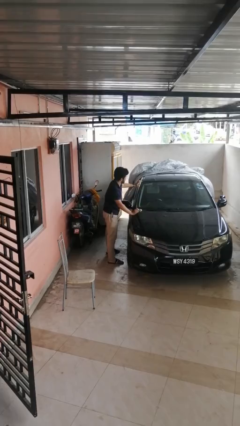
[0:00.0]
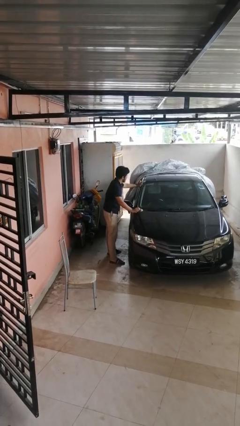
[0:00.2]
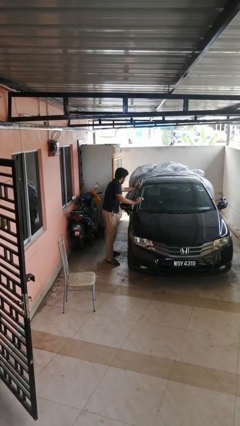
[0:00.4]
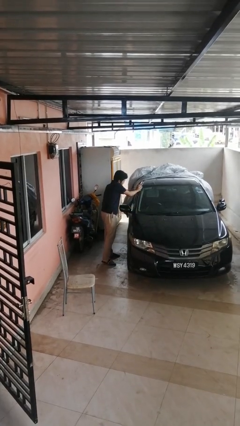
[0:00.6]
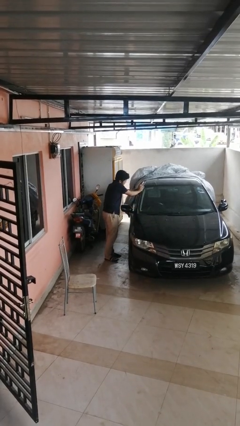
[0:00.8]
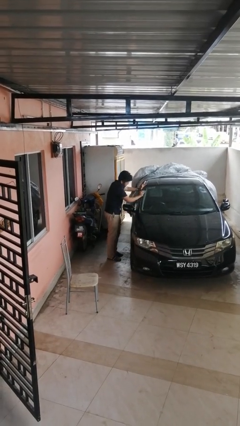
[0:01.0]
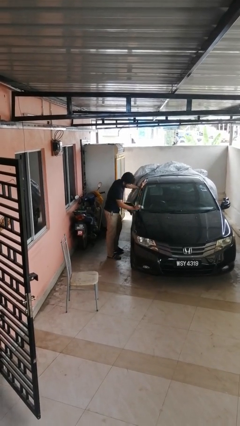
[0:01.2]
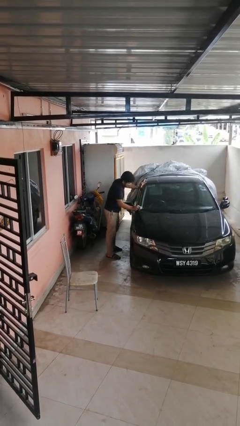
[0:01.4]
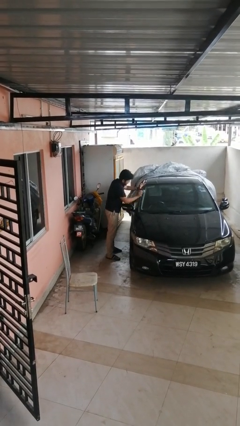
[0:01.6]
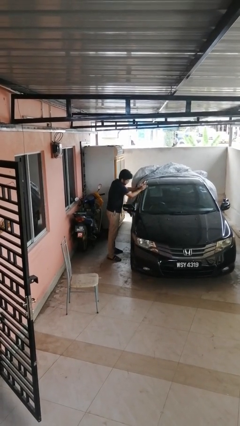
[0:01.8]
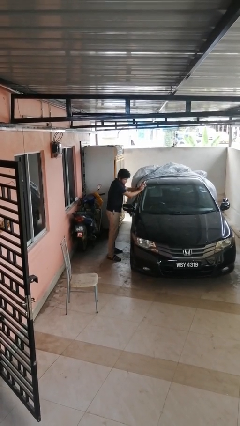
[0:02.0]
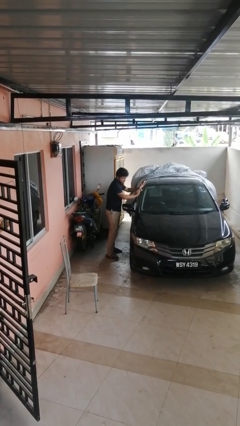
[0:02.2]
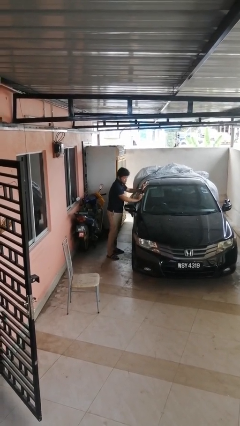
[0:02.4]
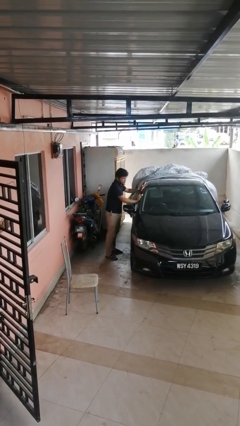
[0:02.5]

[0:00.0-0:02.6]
person polishes car with rag

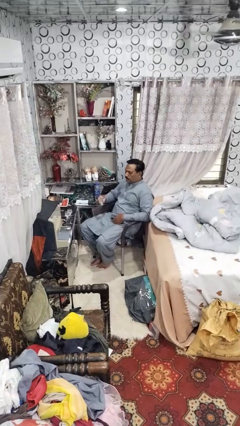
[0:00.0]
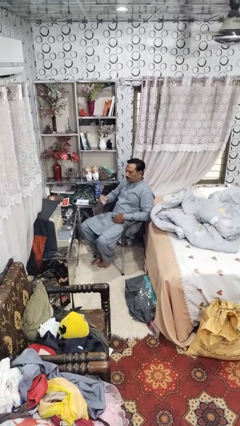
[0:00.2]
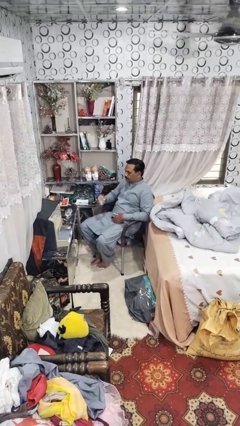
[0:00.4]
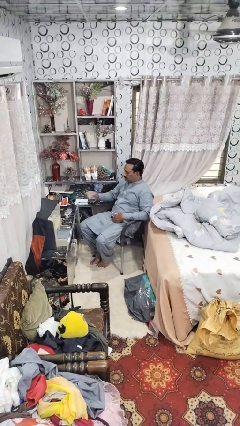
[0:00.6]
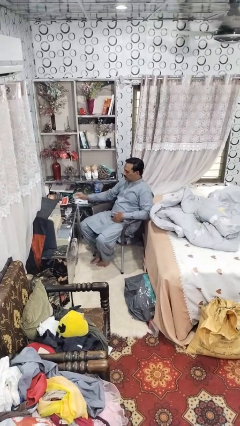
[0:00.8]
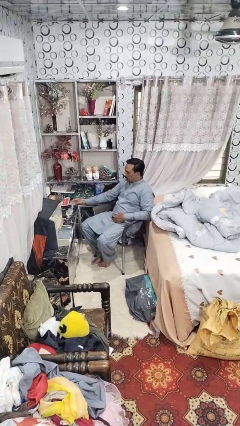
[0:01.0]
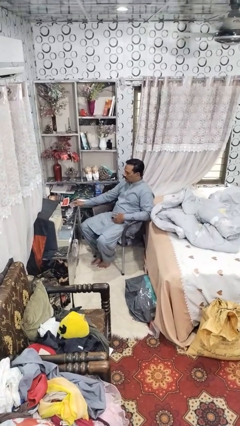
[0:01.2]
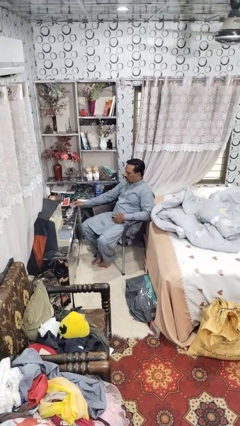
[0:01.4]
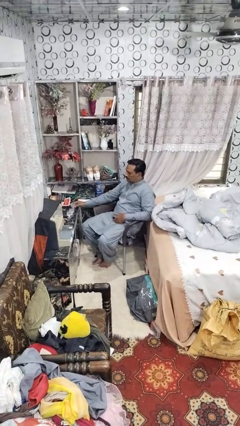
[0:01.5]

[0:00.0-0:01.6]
person puts down object on table

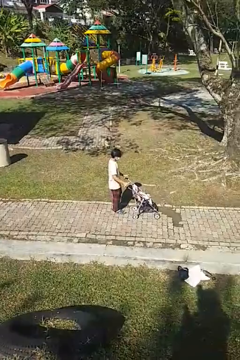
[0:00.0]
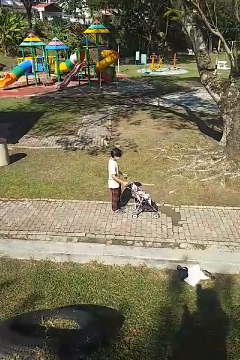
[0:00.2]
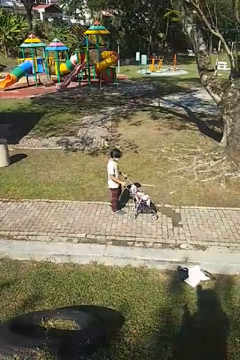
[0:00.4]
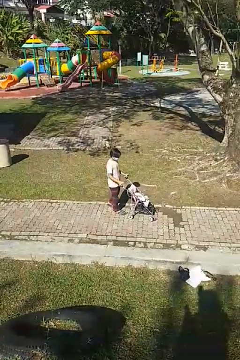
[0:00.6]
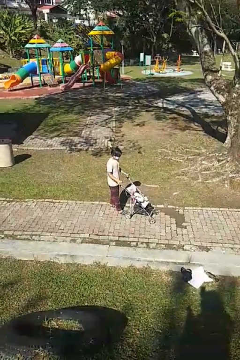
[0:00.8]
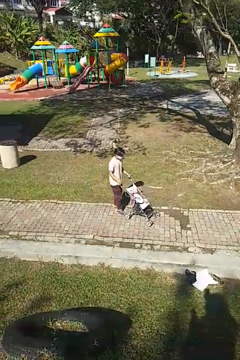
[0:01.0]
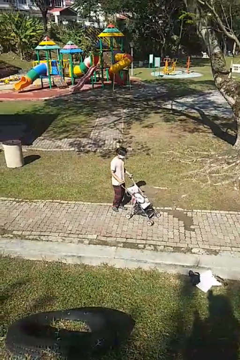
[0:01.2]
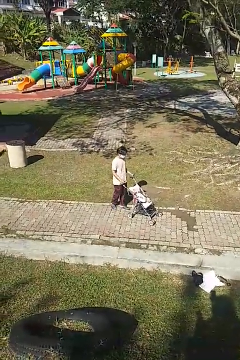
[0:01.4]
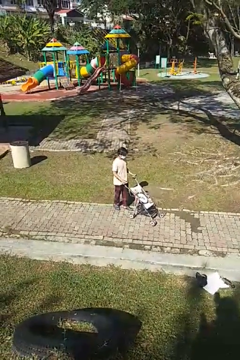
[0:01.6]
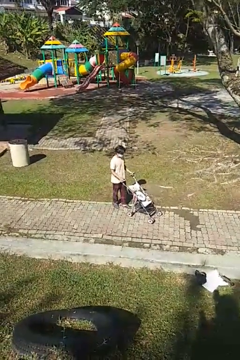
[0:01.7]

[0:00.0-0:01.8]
person pulls wheeled cart

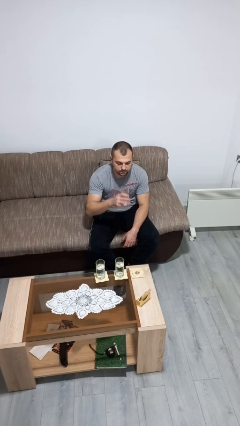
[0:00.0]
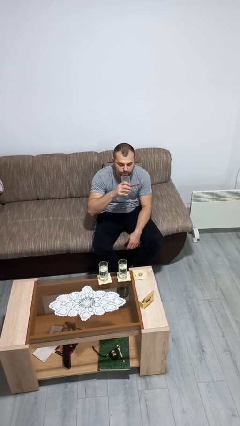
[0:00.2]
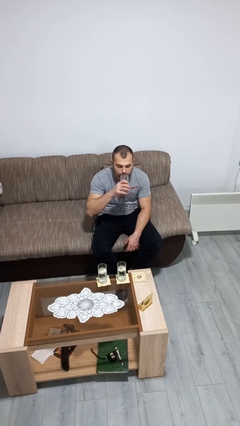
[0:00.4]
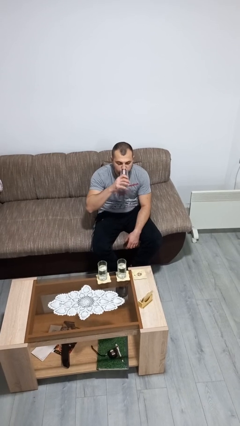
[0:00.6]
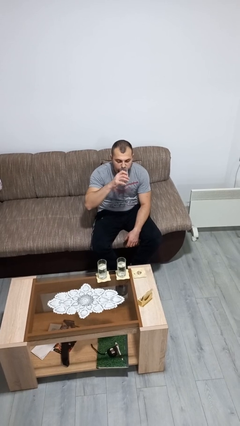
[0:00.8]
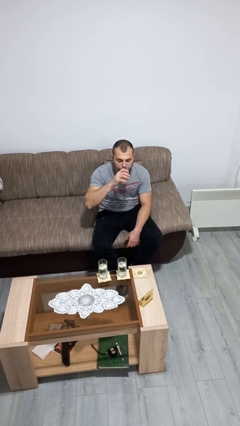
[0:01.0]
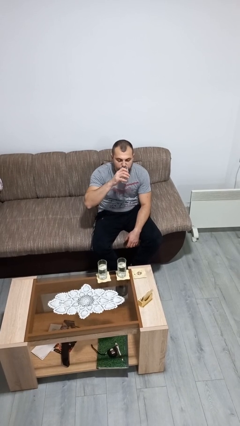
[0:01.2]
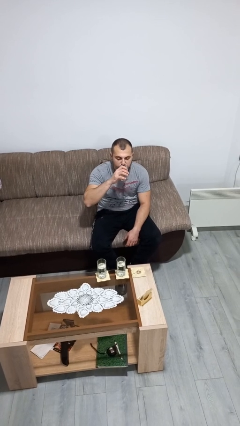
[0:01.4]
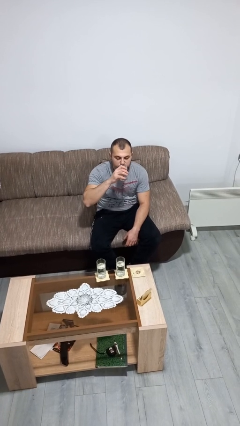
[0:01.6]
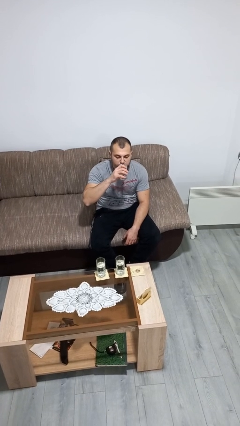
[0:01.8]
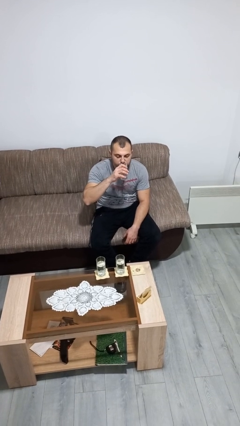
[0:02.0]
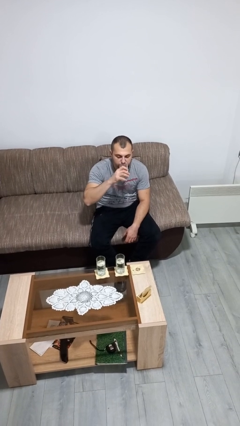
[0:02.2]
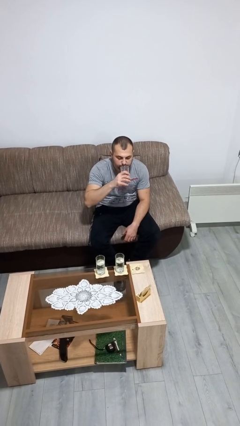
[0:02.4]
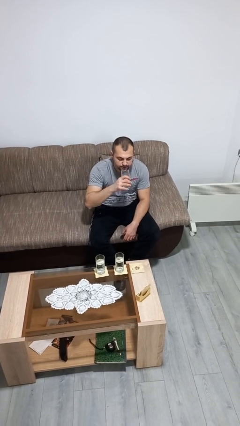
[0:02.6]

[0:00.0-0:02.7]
person drinks from shotglass

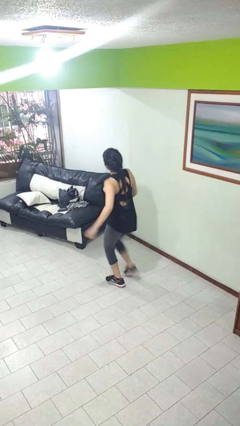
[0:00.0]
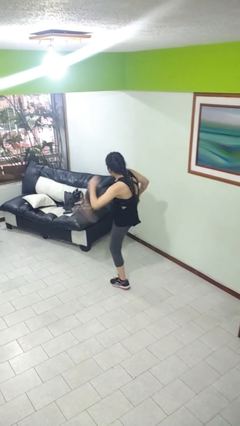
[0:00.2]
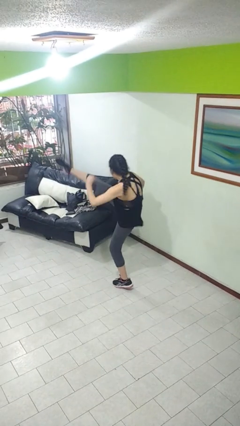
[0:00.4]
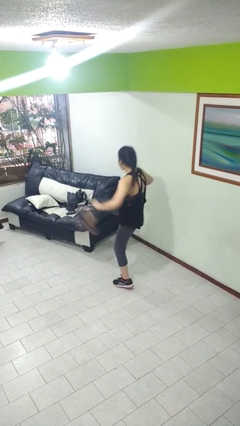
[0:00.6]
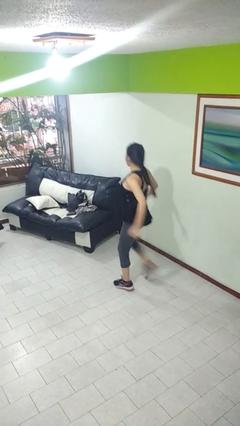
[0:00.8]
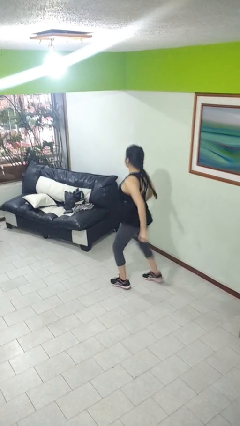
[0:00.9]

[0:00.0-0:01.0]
person karate kicks

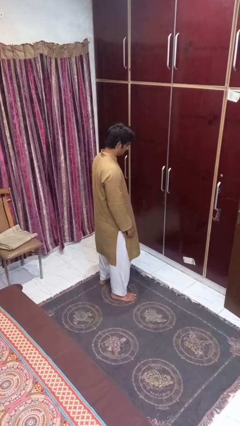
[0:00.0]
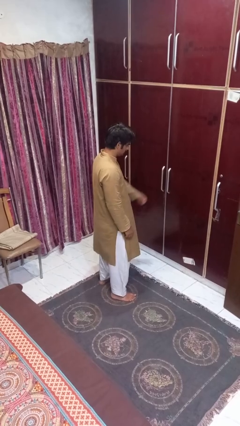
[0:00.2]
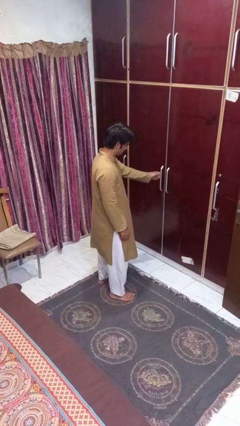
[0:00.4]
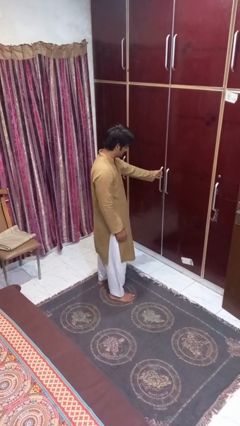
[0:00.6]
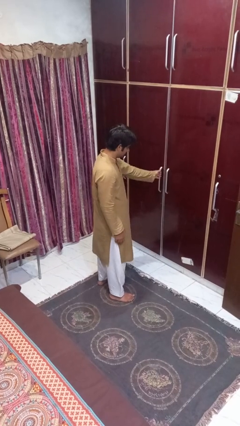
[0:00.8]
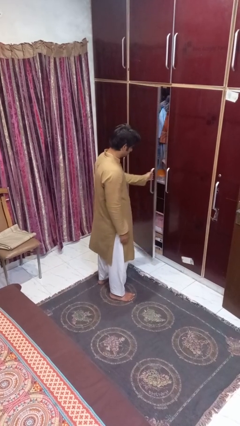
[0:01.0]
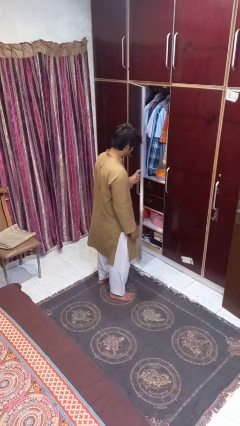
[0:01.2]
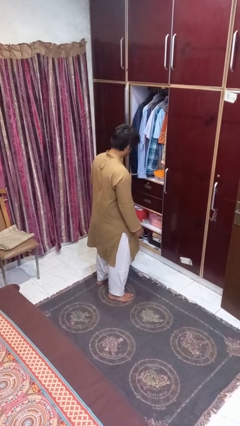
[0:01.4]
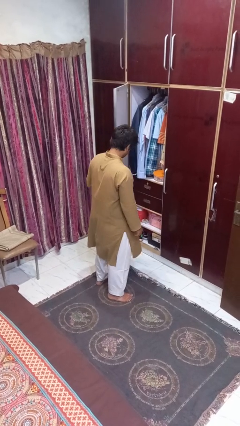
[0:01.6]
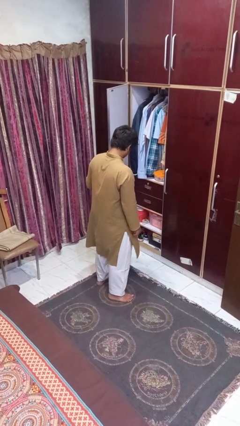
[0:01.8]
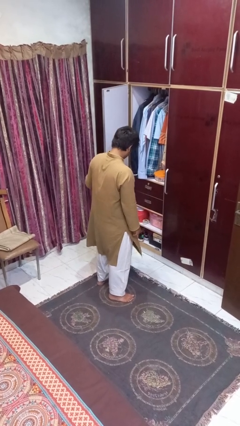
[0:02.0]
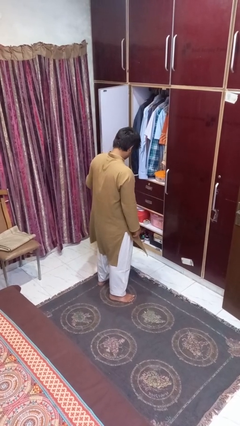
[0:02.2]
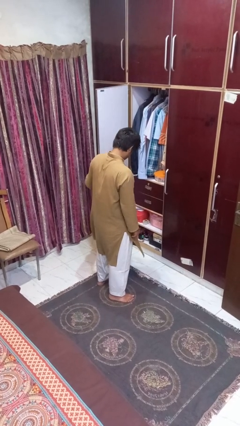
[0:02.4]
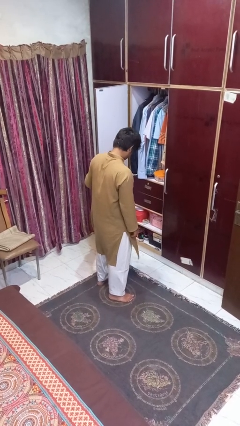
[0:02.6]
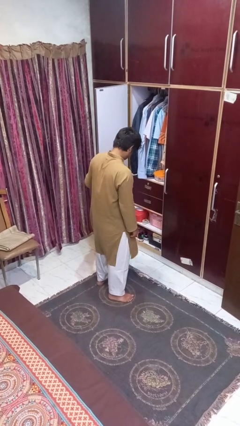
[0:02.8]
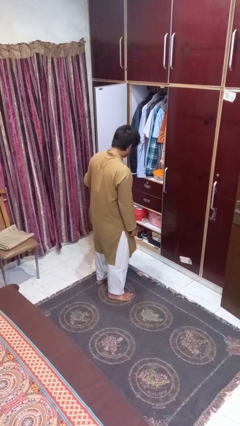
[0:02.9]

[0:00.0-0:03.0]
person opens closet door

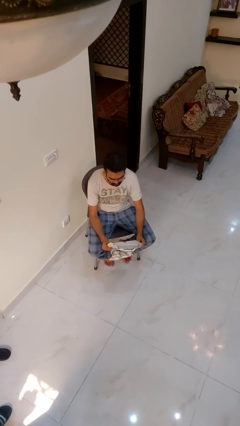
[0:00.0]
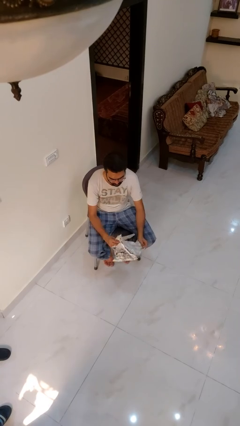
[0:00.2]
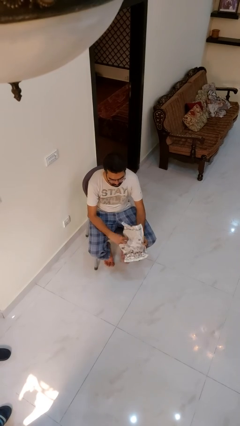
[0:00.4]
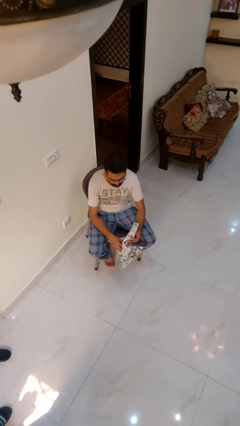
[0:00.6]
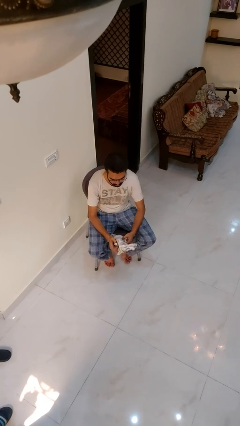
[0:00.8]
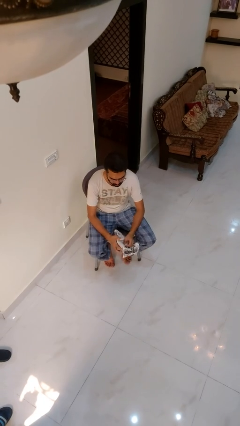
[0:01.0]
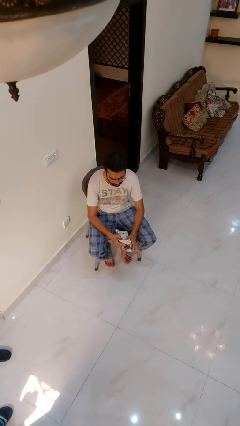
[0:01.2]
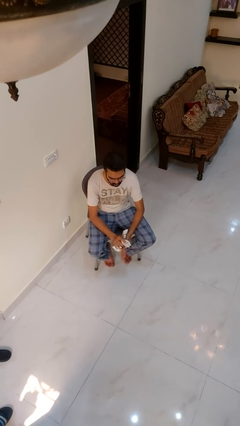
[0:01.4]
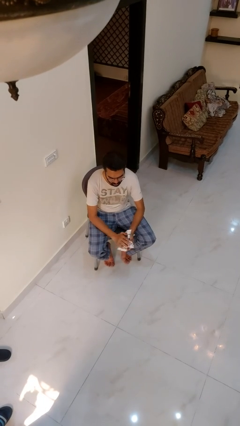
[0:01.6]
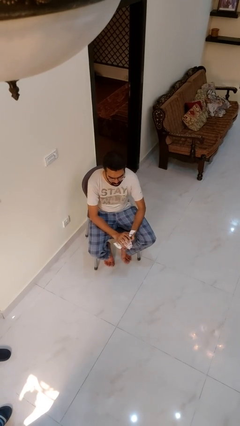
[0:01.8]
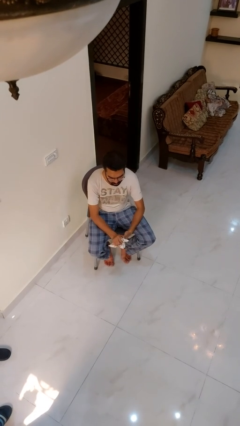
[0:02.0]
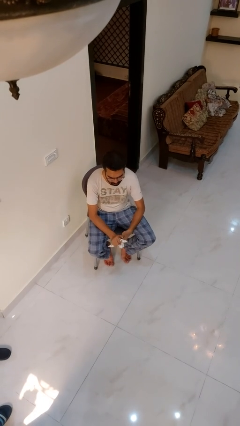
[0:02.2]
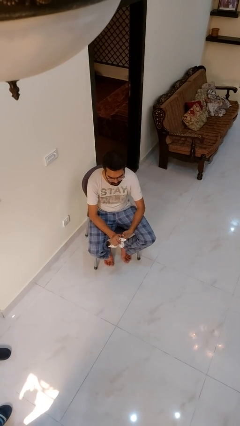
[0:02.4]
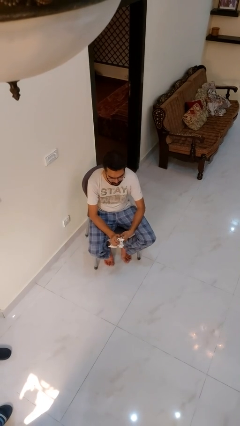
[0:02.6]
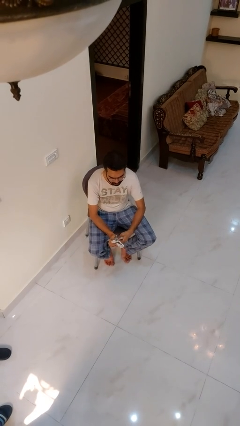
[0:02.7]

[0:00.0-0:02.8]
person crumples paper

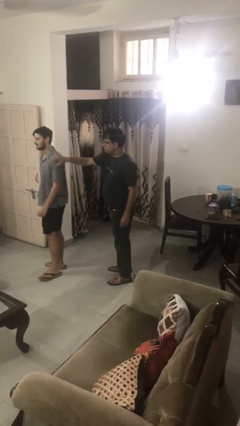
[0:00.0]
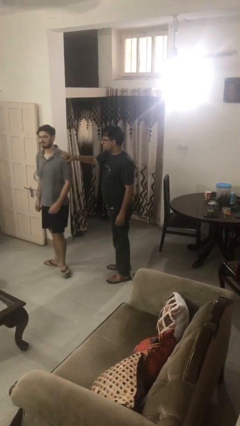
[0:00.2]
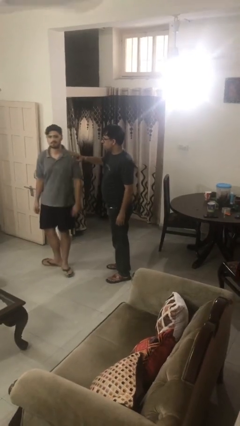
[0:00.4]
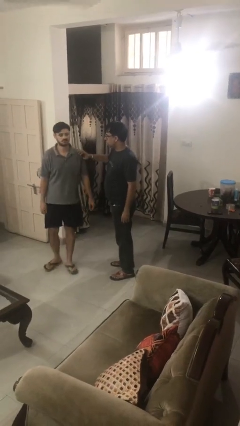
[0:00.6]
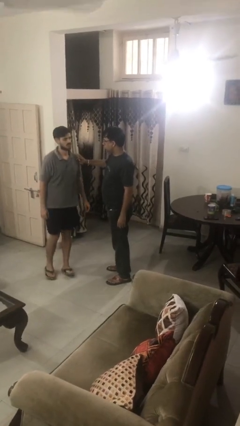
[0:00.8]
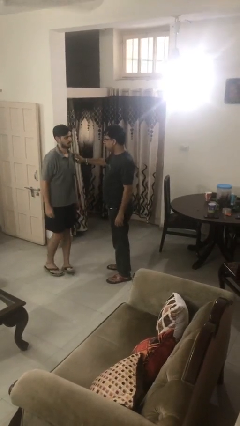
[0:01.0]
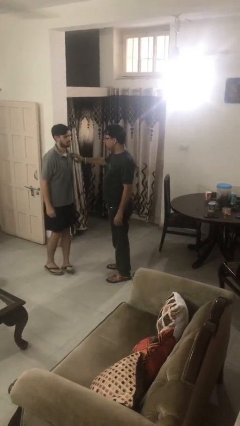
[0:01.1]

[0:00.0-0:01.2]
person spins person around

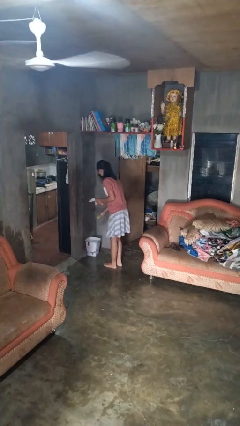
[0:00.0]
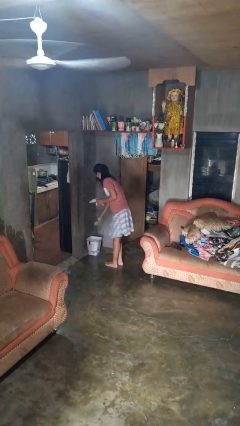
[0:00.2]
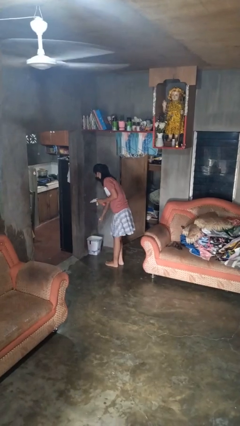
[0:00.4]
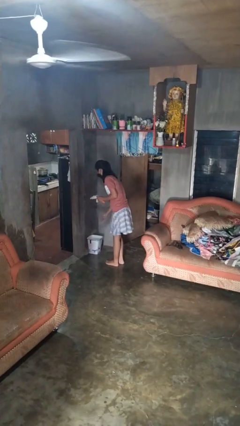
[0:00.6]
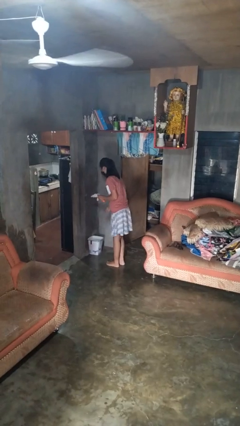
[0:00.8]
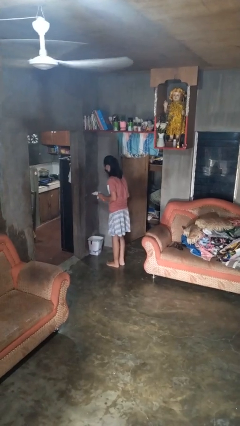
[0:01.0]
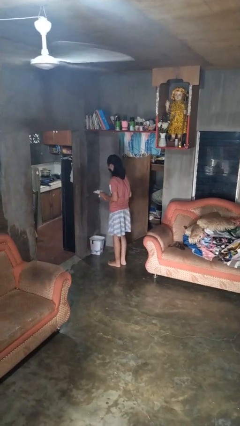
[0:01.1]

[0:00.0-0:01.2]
person discards trash
